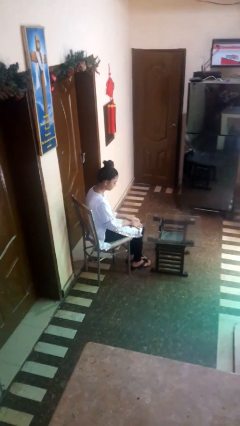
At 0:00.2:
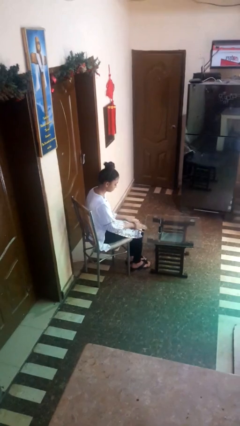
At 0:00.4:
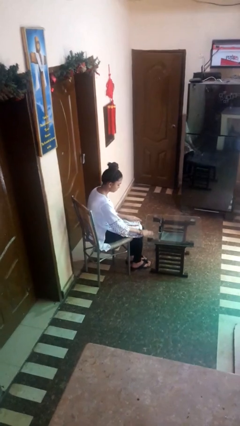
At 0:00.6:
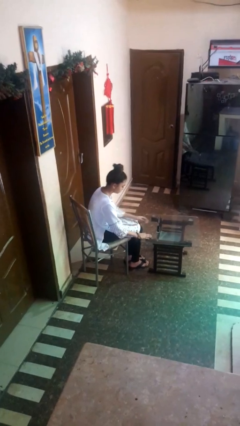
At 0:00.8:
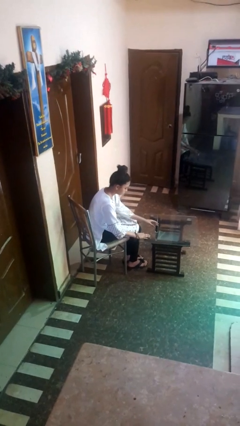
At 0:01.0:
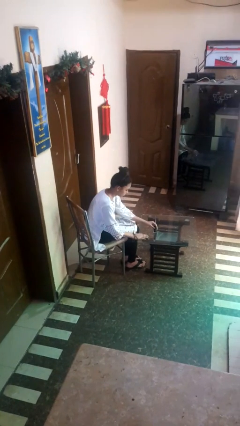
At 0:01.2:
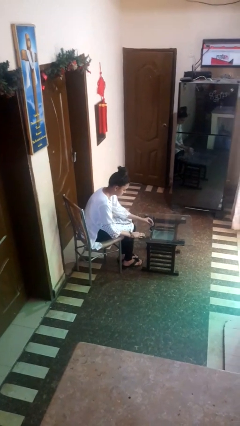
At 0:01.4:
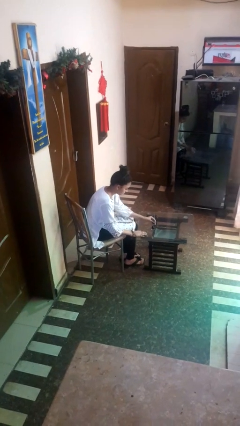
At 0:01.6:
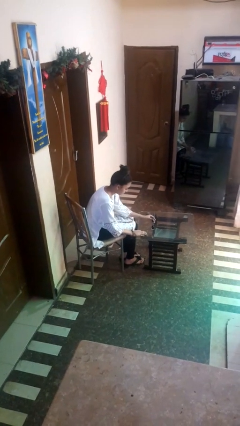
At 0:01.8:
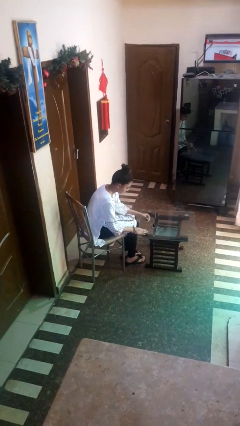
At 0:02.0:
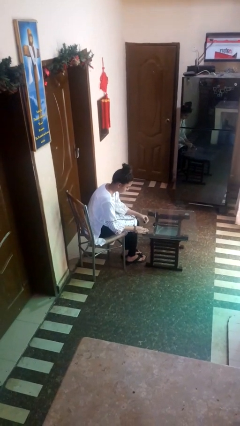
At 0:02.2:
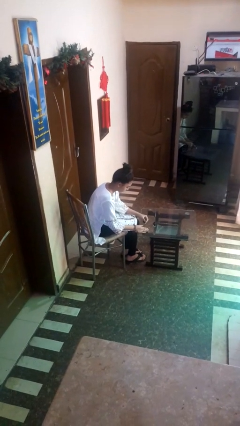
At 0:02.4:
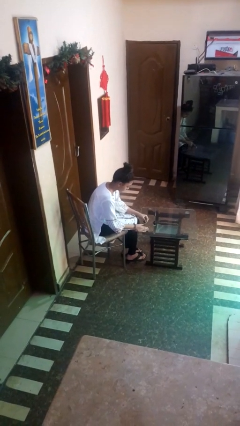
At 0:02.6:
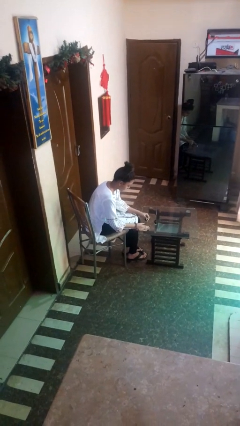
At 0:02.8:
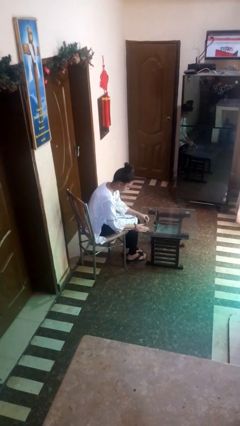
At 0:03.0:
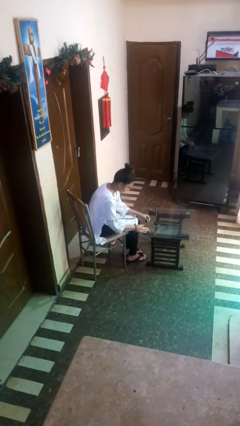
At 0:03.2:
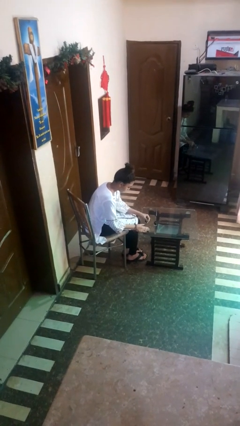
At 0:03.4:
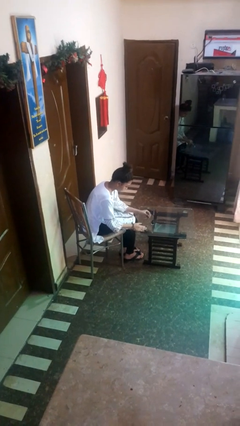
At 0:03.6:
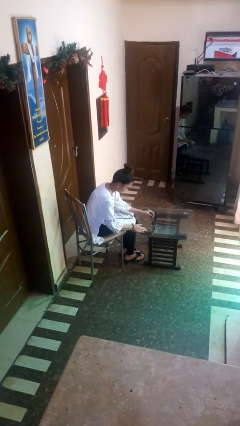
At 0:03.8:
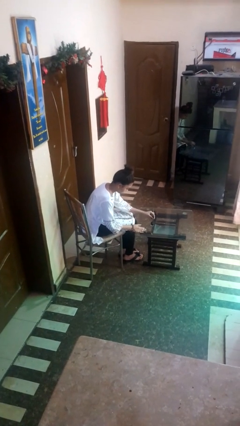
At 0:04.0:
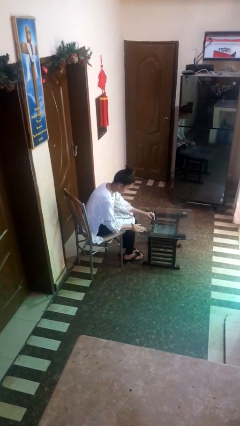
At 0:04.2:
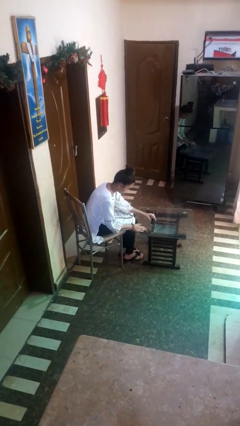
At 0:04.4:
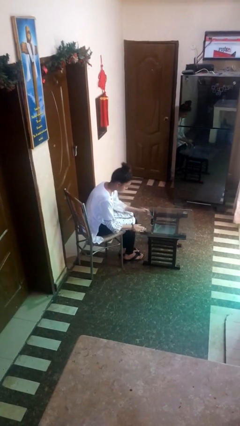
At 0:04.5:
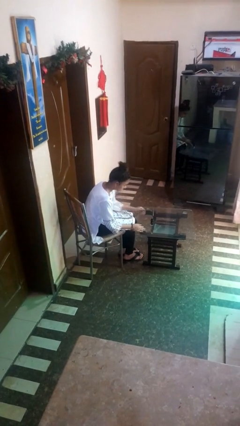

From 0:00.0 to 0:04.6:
person paints fingernails

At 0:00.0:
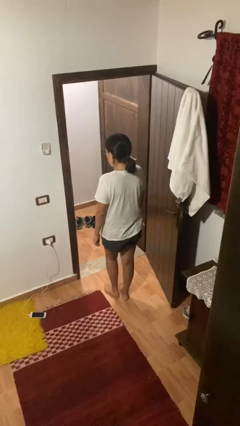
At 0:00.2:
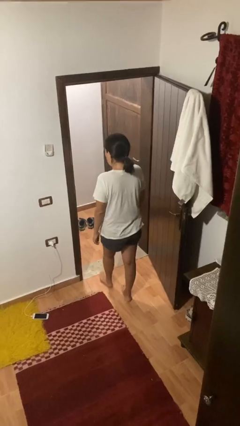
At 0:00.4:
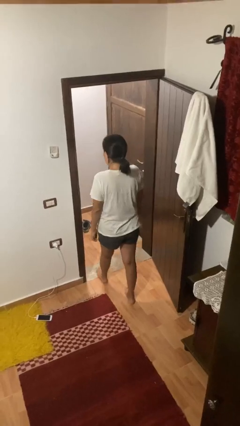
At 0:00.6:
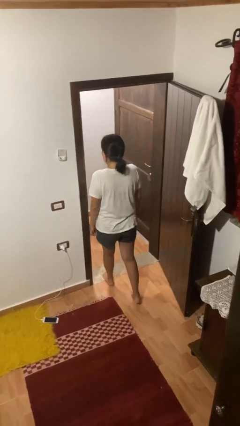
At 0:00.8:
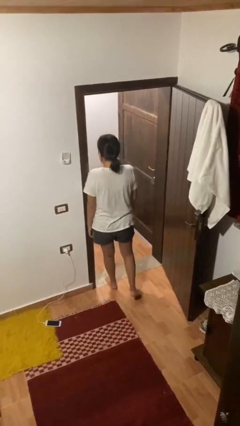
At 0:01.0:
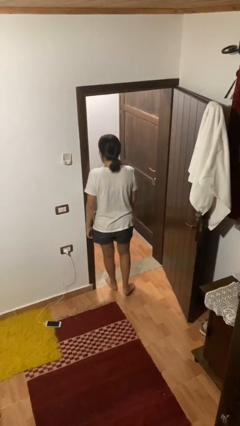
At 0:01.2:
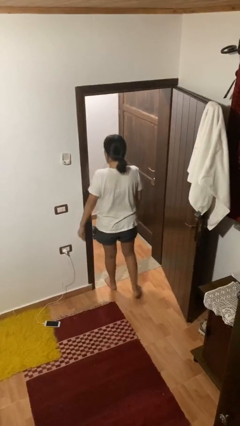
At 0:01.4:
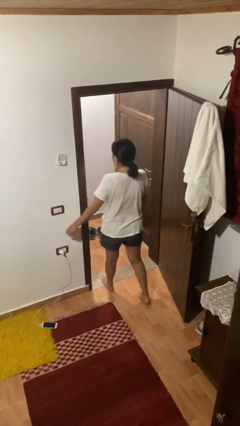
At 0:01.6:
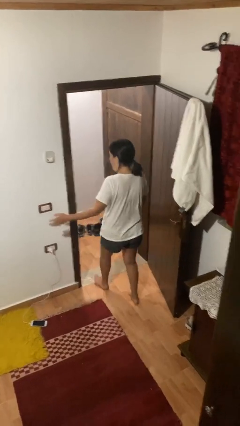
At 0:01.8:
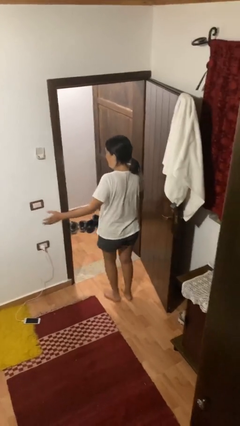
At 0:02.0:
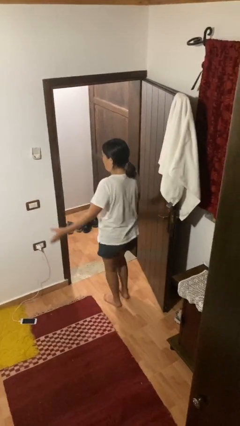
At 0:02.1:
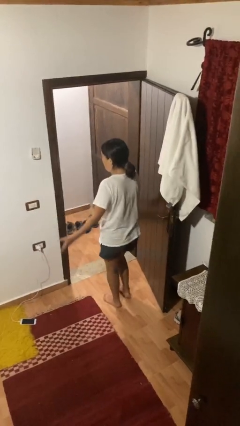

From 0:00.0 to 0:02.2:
person bumps into wall

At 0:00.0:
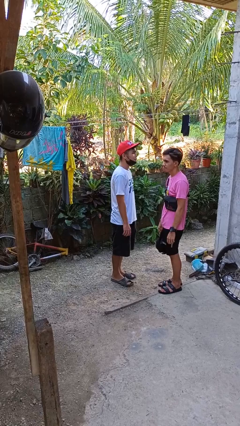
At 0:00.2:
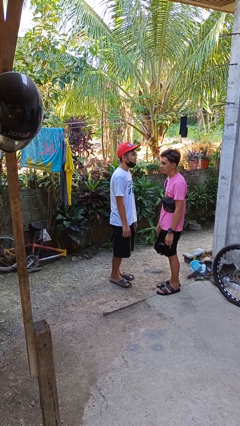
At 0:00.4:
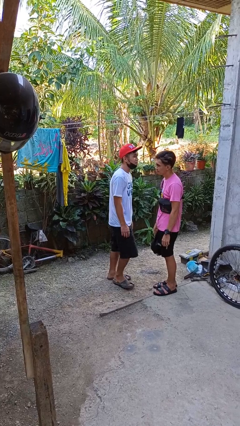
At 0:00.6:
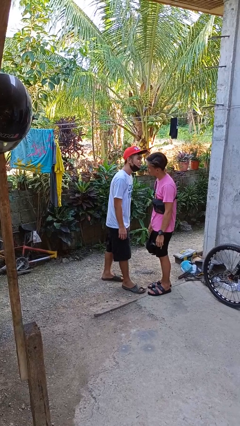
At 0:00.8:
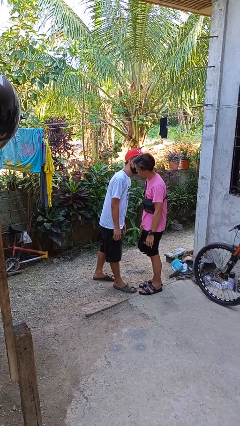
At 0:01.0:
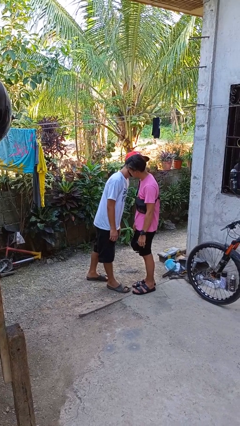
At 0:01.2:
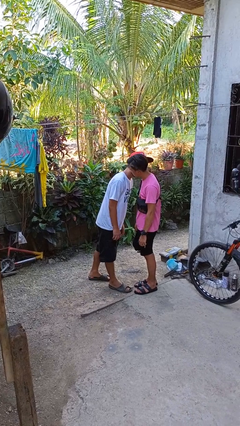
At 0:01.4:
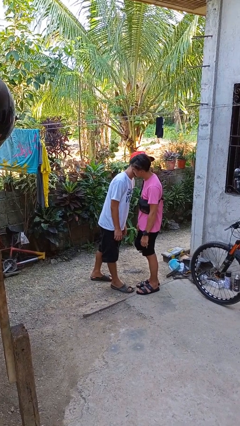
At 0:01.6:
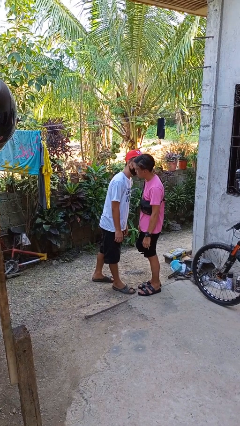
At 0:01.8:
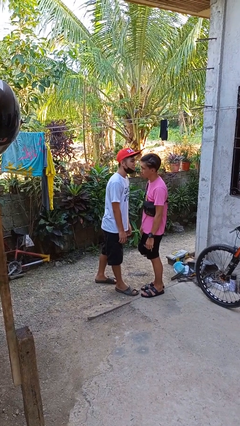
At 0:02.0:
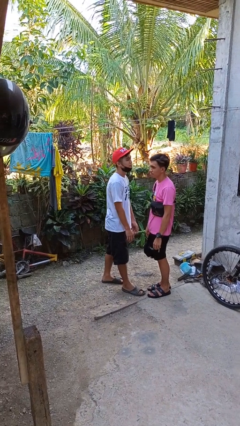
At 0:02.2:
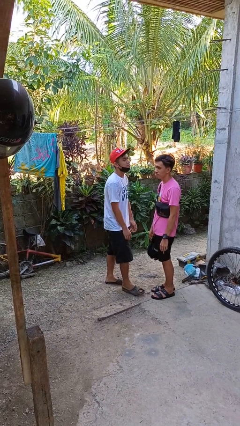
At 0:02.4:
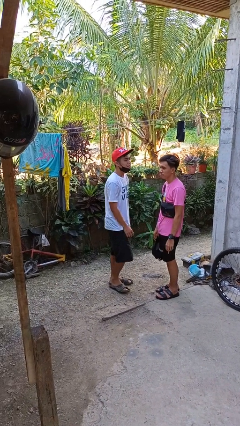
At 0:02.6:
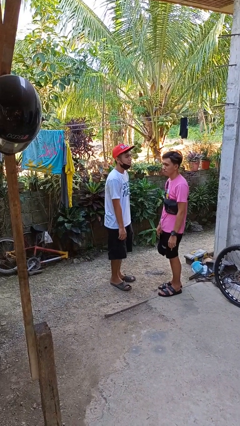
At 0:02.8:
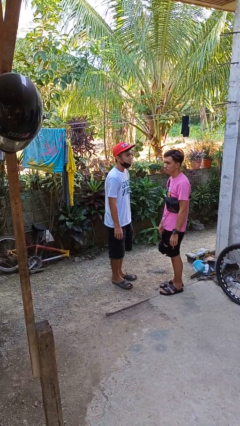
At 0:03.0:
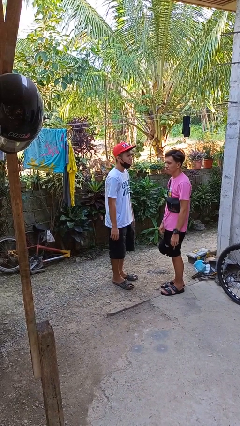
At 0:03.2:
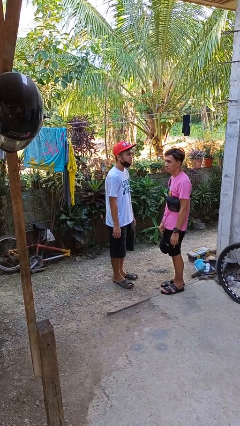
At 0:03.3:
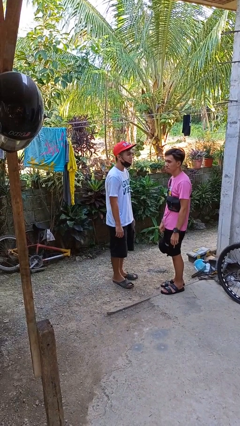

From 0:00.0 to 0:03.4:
person kisses cheek of person

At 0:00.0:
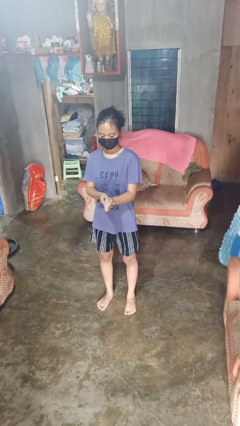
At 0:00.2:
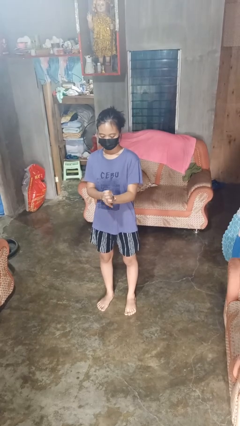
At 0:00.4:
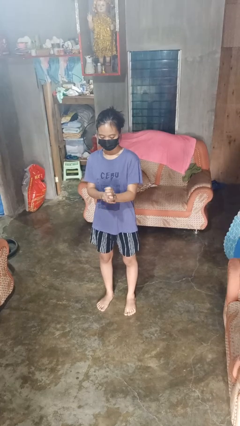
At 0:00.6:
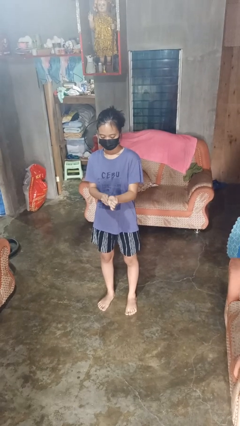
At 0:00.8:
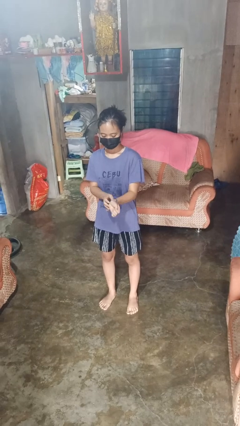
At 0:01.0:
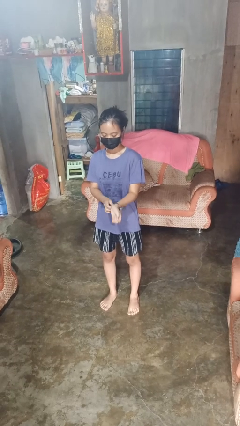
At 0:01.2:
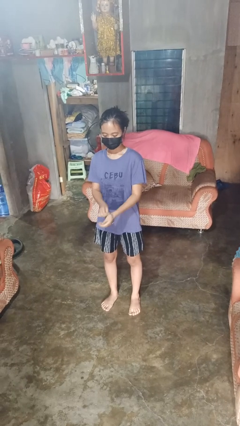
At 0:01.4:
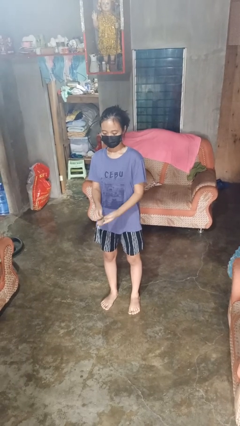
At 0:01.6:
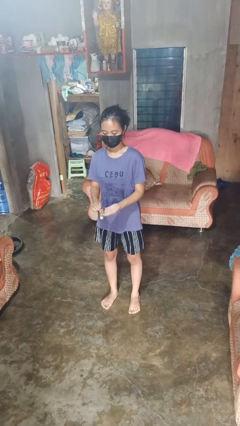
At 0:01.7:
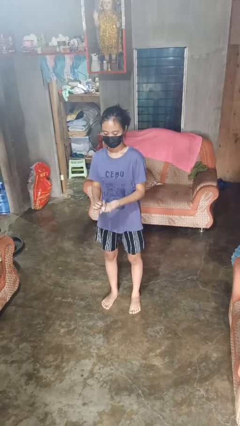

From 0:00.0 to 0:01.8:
person takes off wristwatch

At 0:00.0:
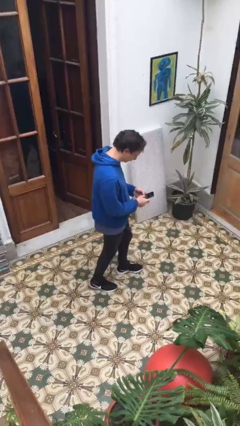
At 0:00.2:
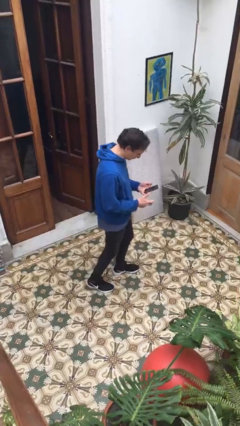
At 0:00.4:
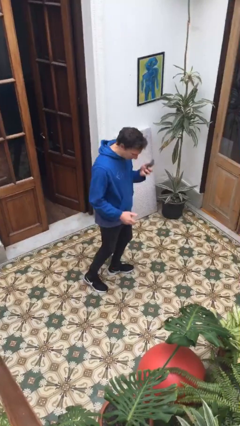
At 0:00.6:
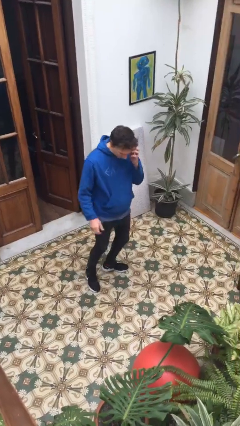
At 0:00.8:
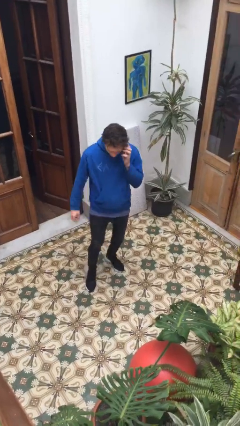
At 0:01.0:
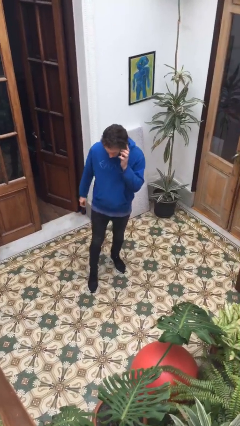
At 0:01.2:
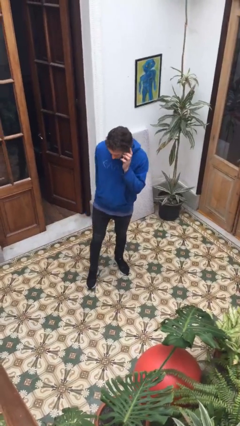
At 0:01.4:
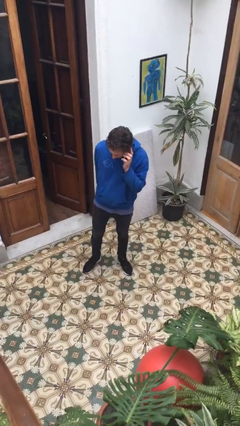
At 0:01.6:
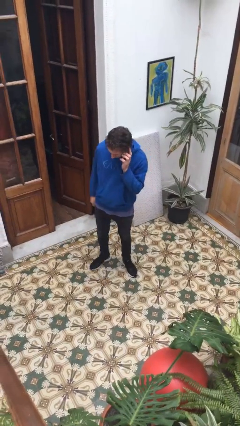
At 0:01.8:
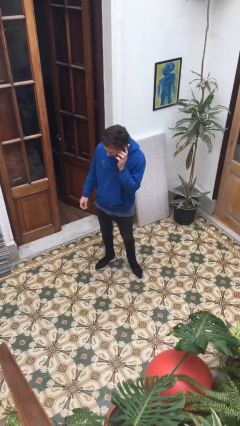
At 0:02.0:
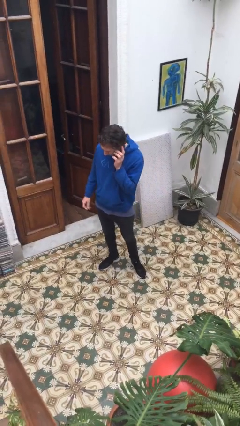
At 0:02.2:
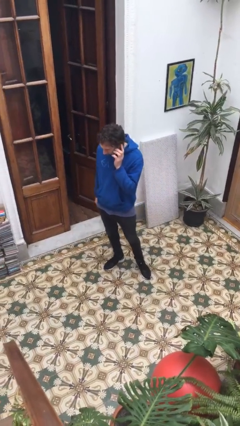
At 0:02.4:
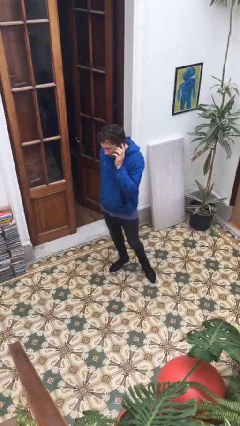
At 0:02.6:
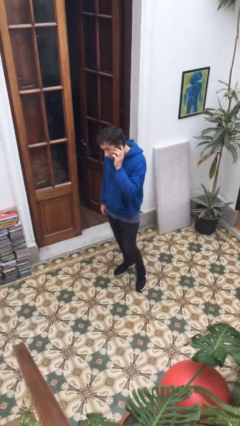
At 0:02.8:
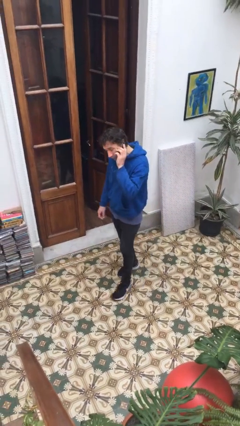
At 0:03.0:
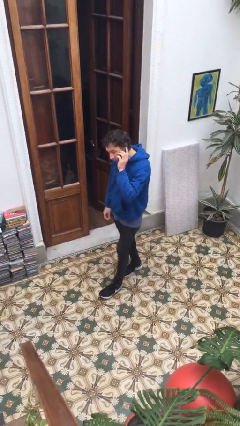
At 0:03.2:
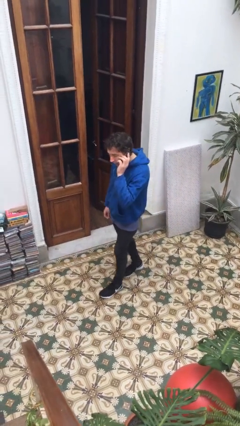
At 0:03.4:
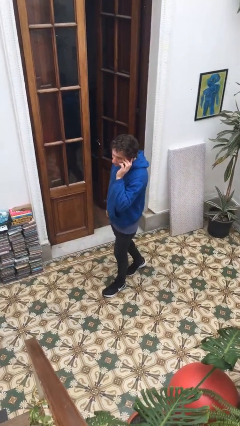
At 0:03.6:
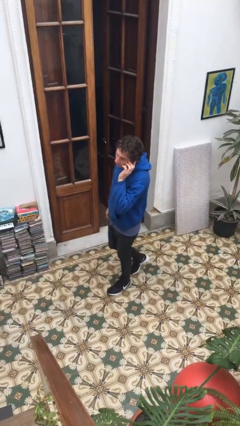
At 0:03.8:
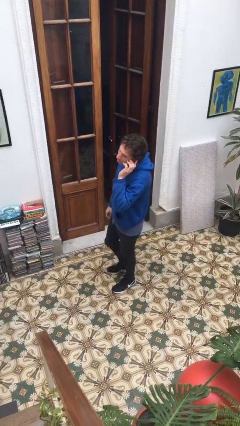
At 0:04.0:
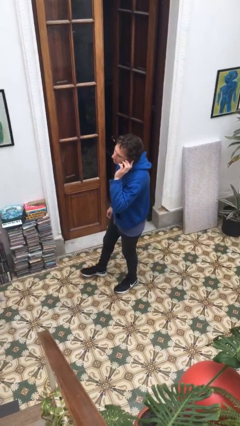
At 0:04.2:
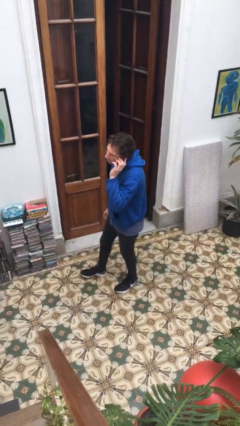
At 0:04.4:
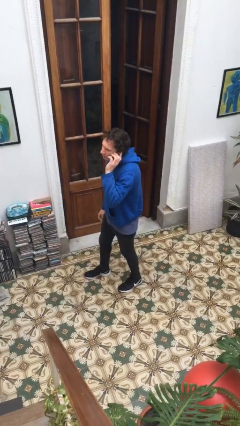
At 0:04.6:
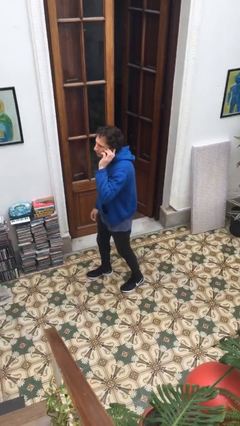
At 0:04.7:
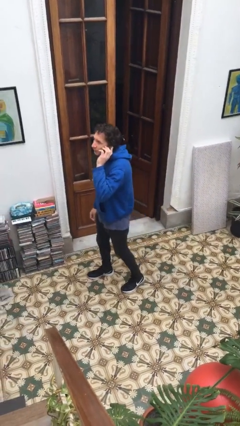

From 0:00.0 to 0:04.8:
person talks on phone

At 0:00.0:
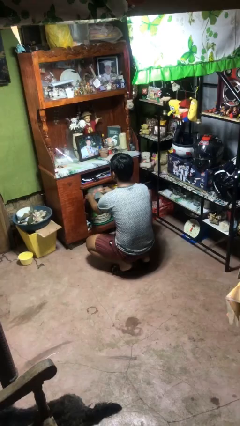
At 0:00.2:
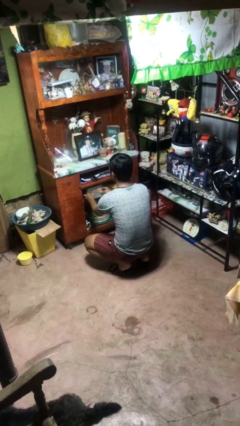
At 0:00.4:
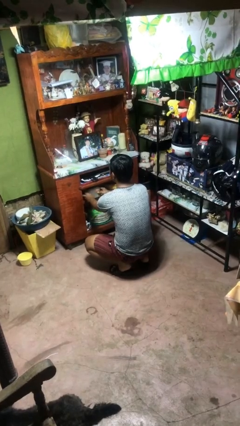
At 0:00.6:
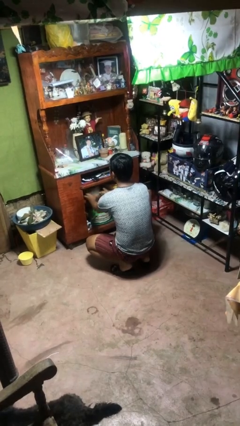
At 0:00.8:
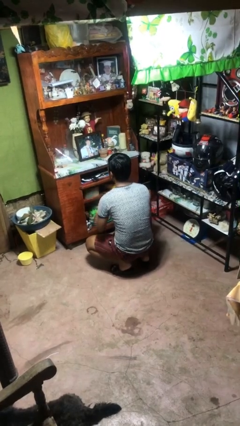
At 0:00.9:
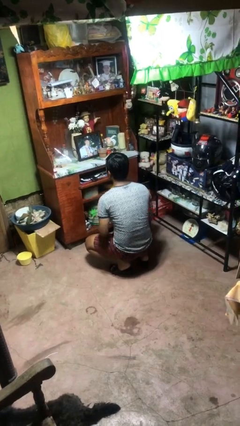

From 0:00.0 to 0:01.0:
person puts down object into cabinet
